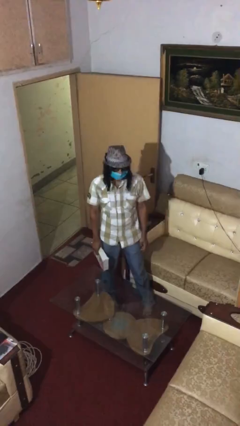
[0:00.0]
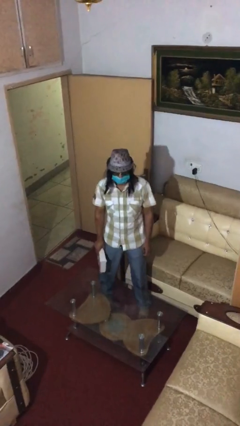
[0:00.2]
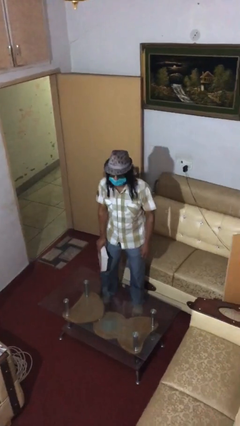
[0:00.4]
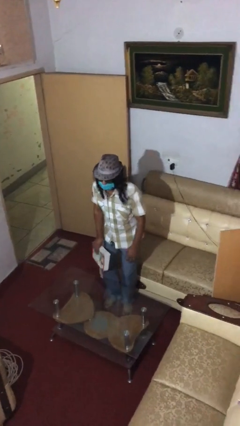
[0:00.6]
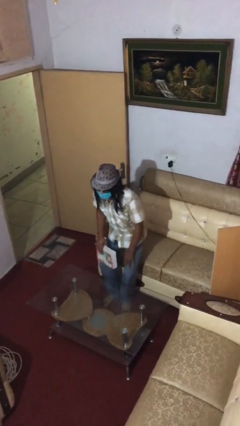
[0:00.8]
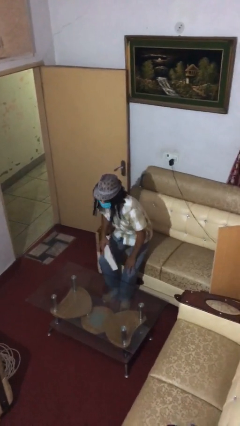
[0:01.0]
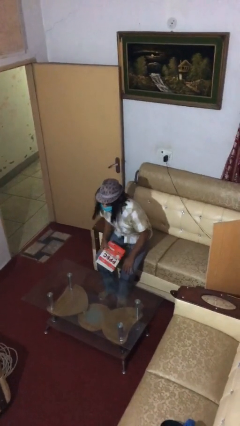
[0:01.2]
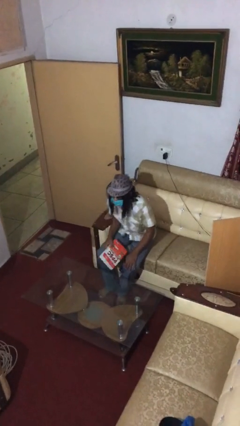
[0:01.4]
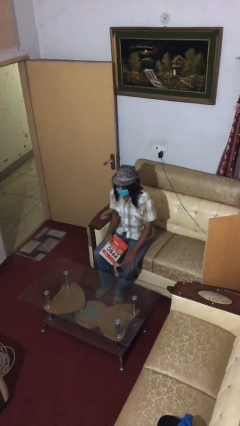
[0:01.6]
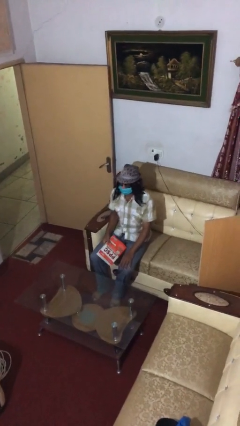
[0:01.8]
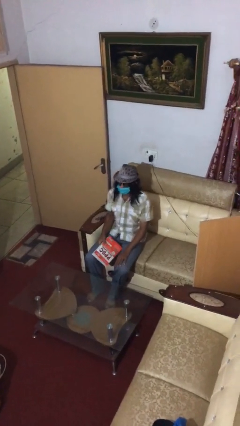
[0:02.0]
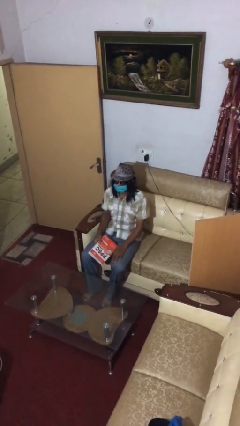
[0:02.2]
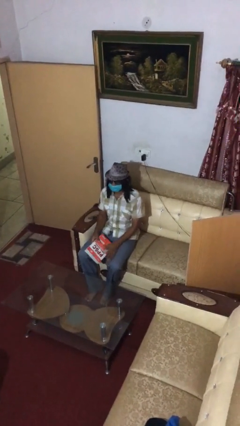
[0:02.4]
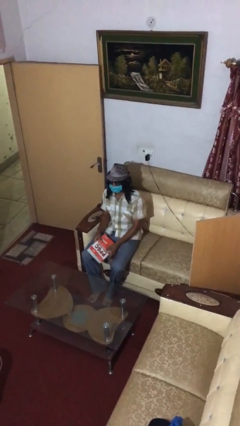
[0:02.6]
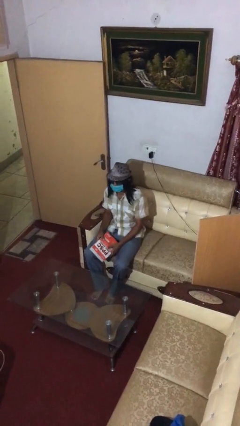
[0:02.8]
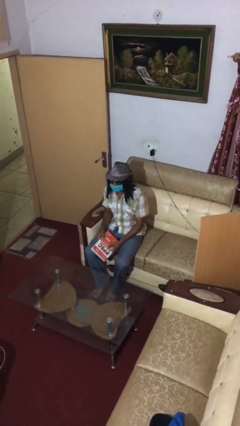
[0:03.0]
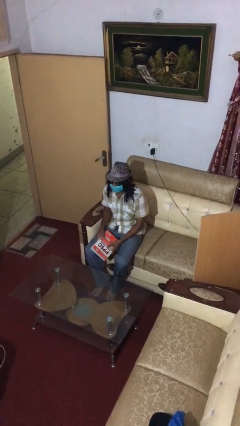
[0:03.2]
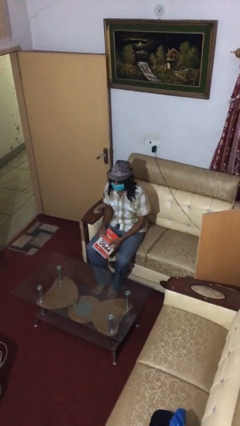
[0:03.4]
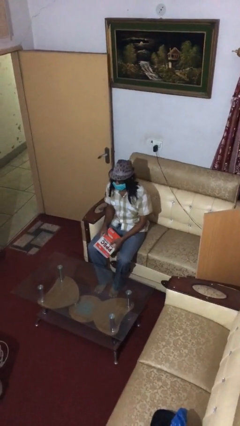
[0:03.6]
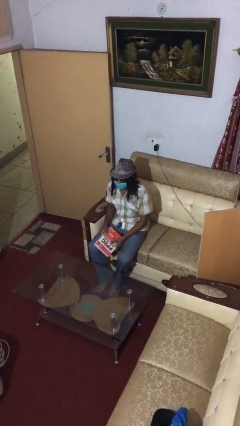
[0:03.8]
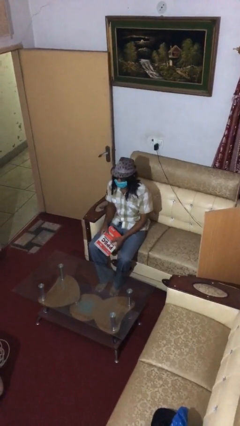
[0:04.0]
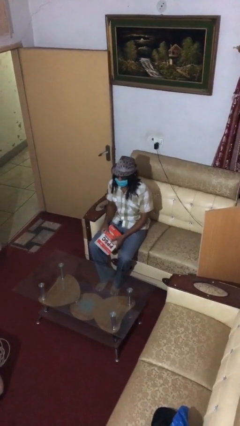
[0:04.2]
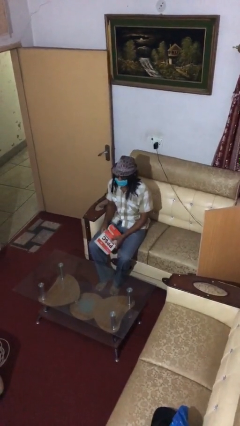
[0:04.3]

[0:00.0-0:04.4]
person sits down

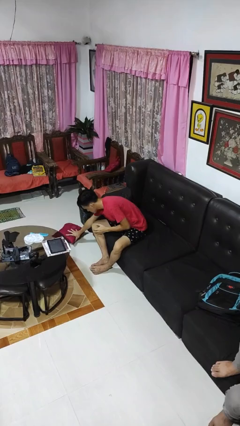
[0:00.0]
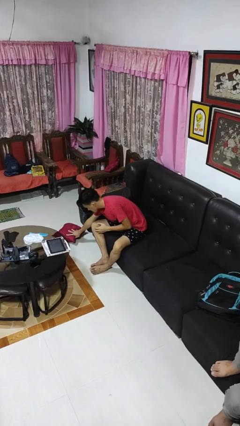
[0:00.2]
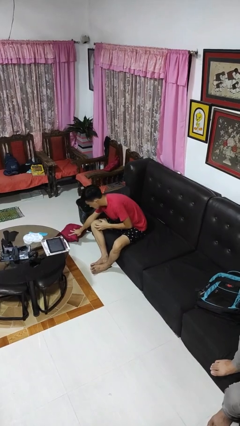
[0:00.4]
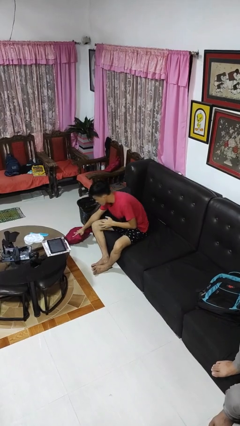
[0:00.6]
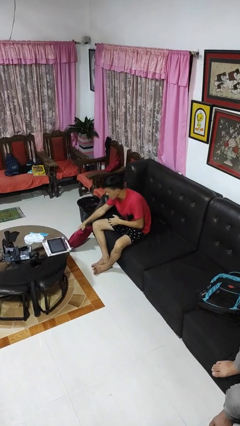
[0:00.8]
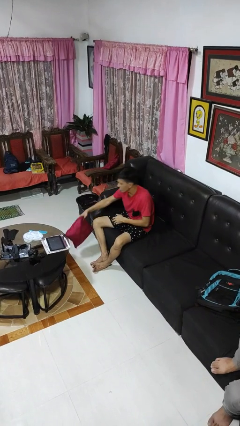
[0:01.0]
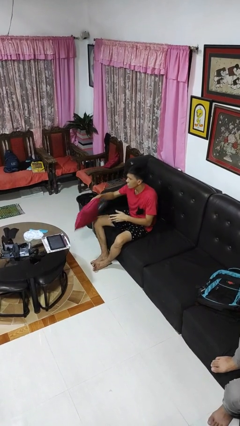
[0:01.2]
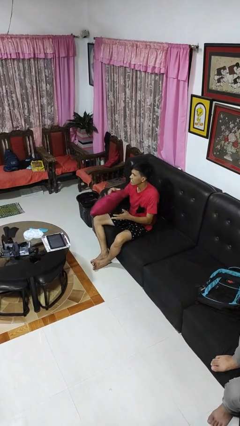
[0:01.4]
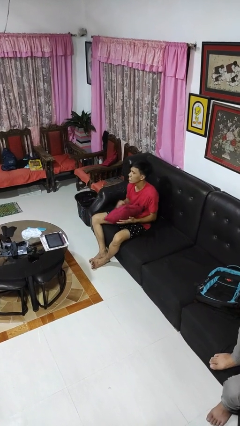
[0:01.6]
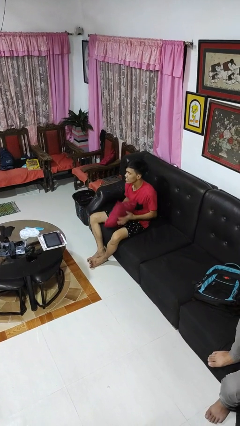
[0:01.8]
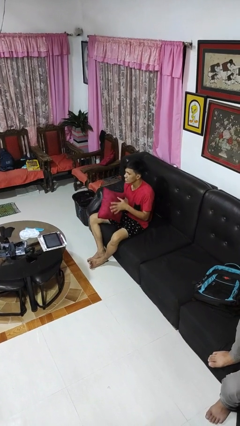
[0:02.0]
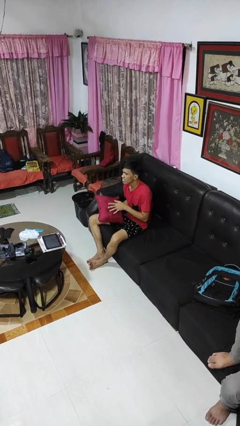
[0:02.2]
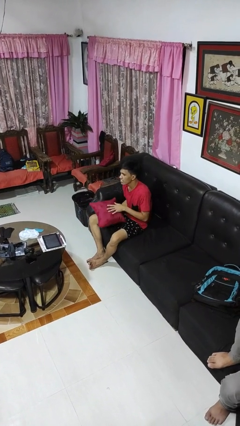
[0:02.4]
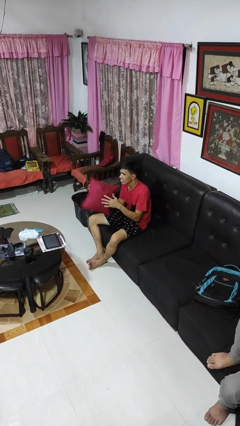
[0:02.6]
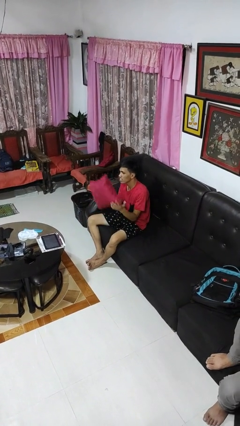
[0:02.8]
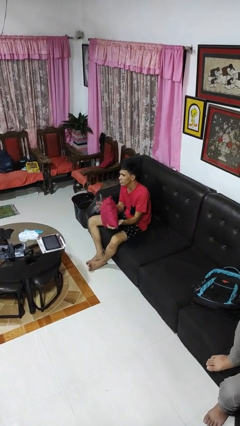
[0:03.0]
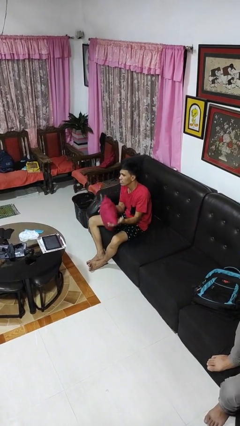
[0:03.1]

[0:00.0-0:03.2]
person picks up object from floor

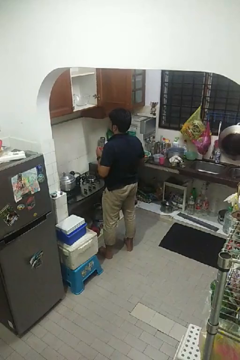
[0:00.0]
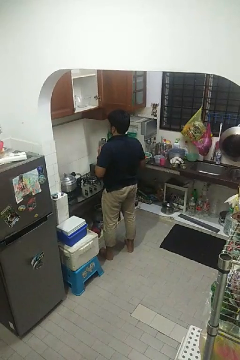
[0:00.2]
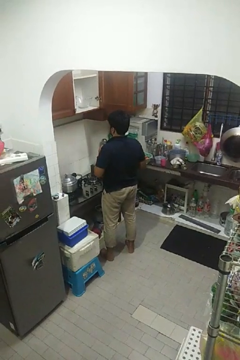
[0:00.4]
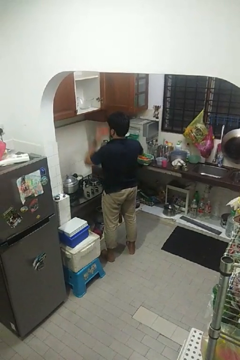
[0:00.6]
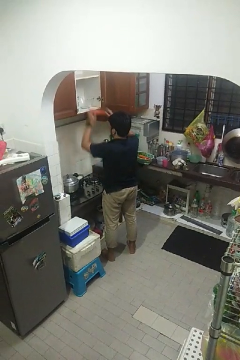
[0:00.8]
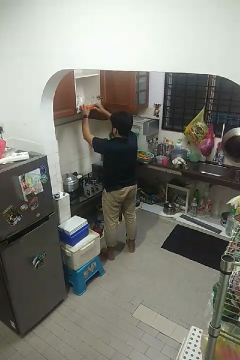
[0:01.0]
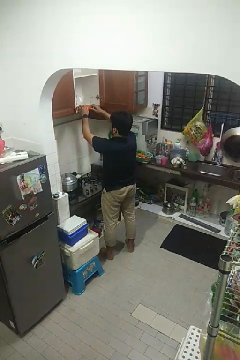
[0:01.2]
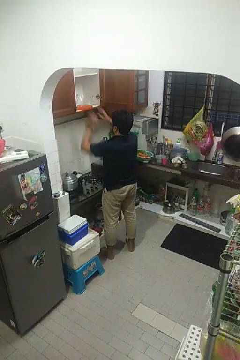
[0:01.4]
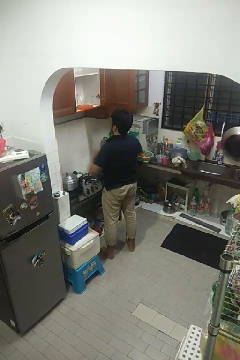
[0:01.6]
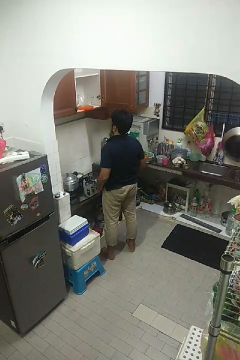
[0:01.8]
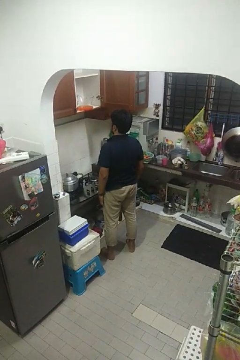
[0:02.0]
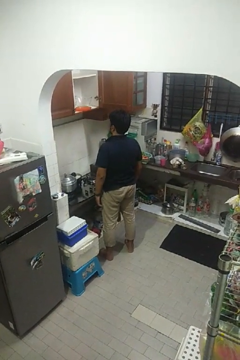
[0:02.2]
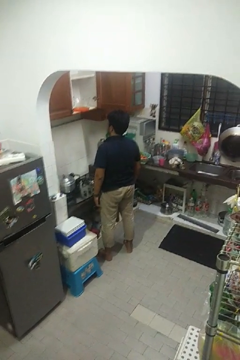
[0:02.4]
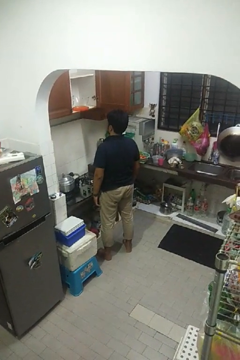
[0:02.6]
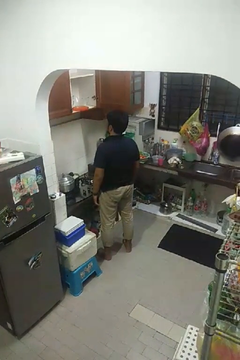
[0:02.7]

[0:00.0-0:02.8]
person puts object in cabinet

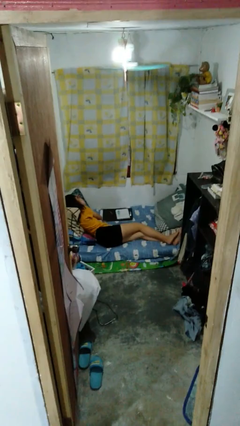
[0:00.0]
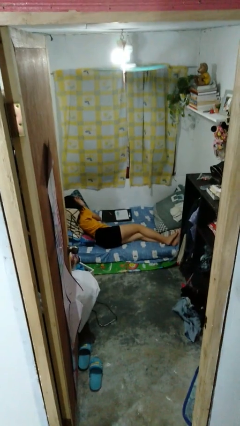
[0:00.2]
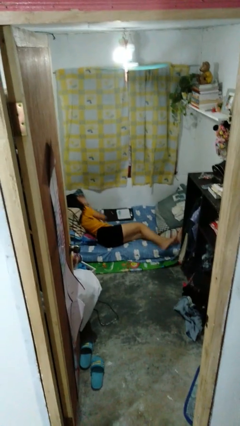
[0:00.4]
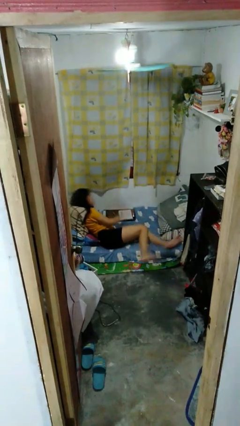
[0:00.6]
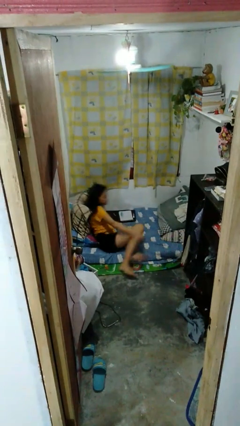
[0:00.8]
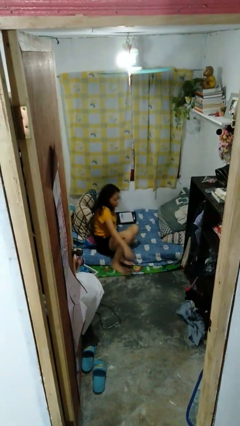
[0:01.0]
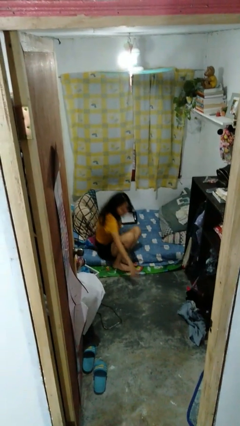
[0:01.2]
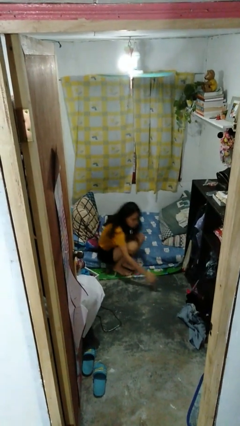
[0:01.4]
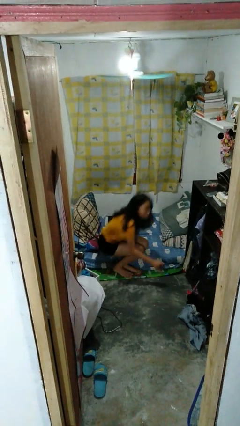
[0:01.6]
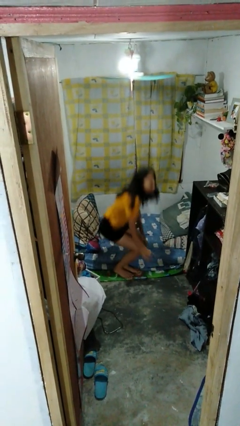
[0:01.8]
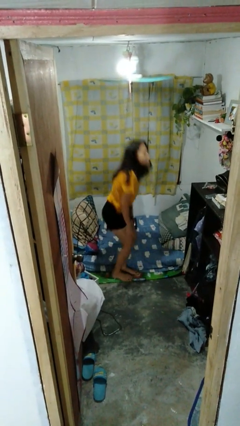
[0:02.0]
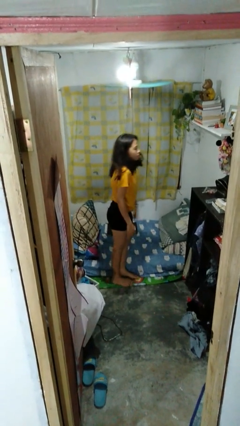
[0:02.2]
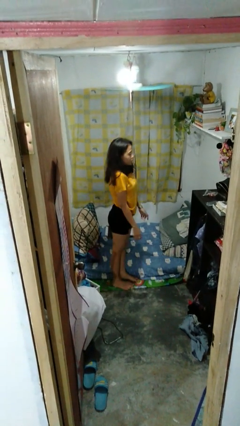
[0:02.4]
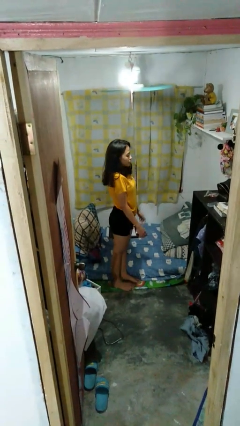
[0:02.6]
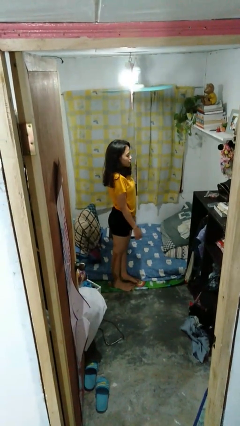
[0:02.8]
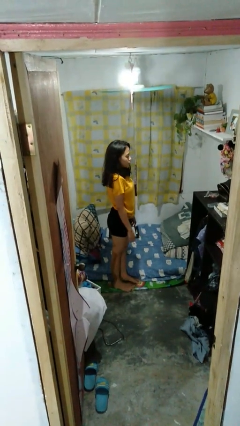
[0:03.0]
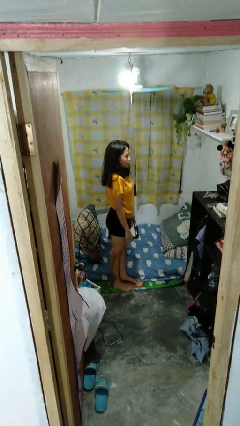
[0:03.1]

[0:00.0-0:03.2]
person stands up

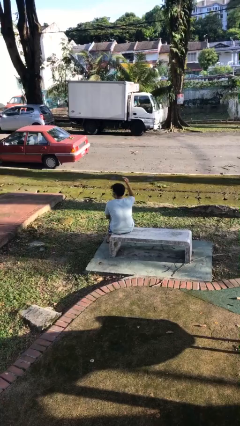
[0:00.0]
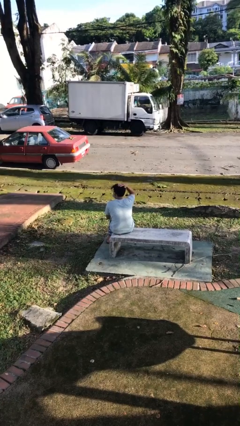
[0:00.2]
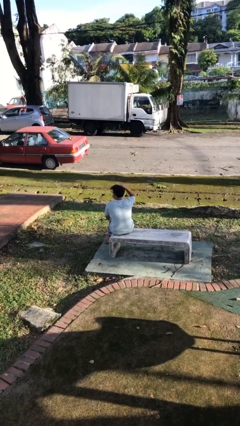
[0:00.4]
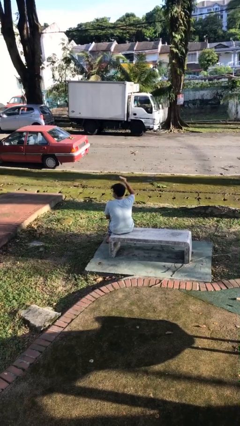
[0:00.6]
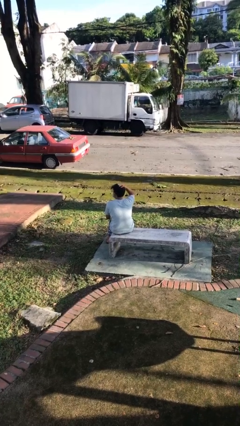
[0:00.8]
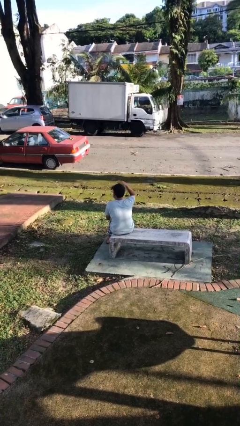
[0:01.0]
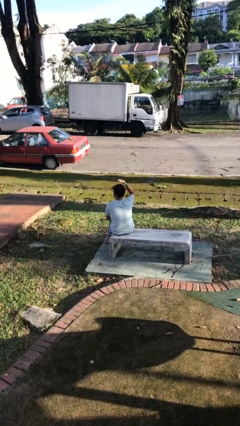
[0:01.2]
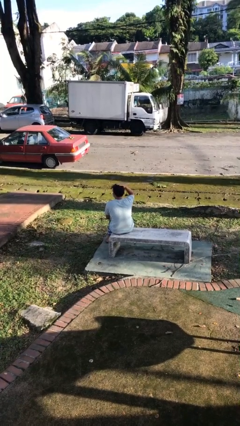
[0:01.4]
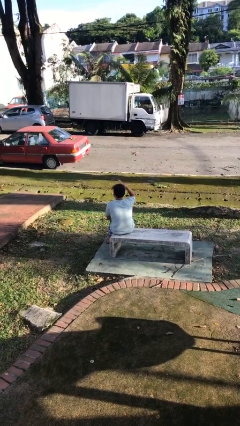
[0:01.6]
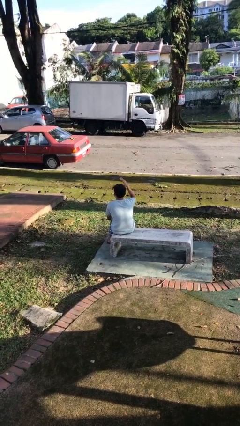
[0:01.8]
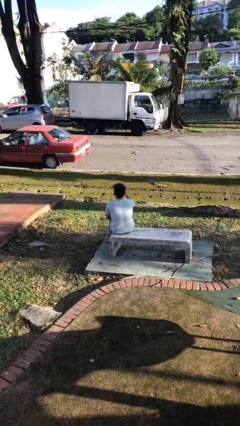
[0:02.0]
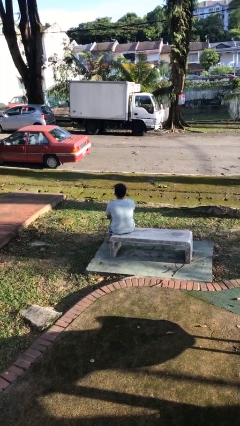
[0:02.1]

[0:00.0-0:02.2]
person pats head

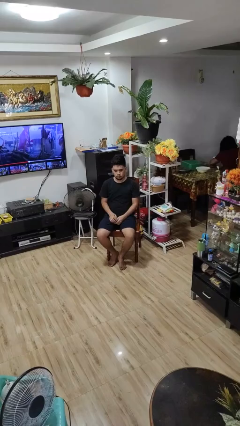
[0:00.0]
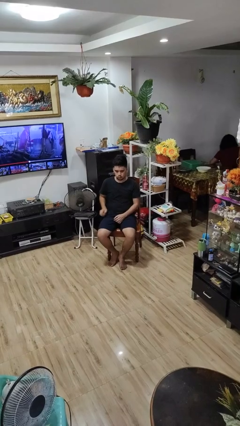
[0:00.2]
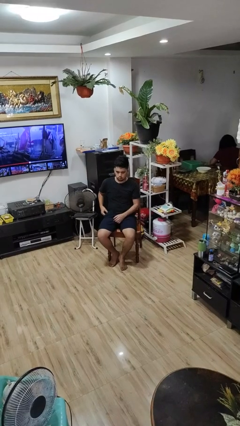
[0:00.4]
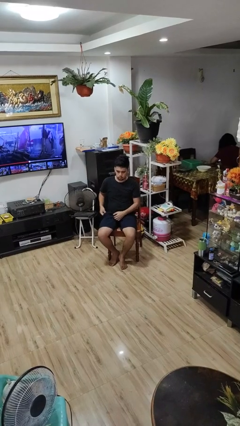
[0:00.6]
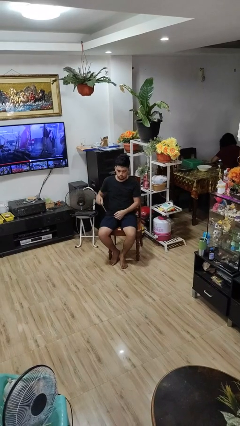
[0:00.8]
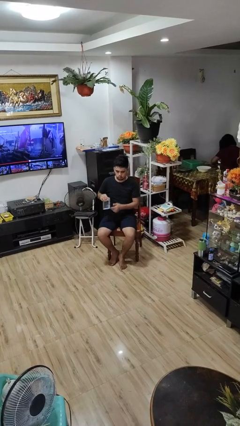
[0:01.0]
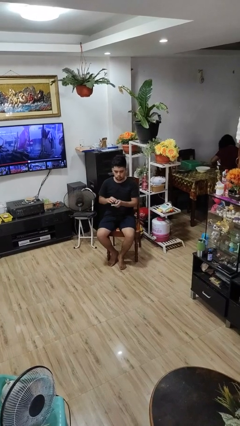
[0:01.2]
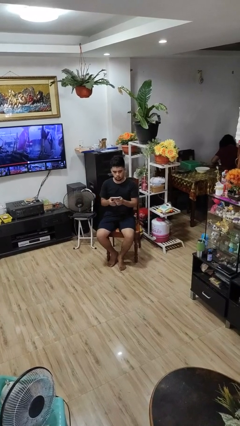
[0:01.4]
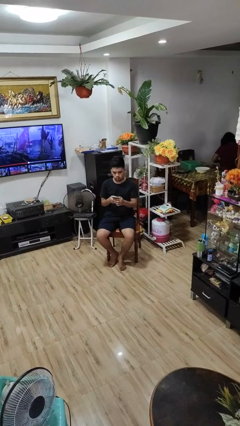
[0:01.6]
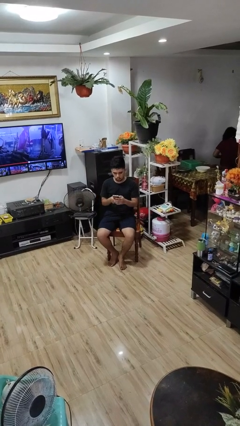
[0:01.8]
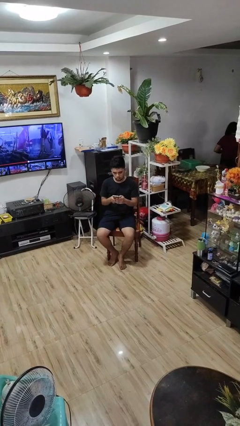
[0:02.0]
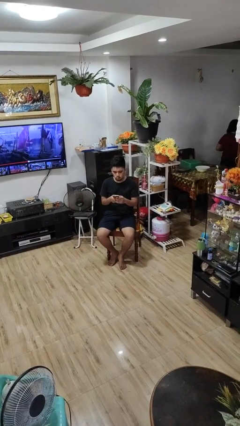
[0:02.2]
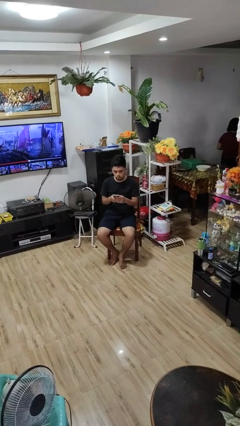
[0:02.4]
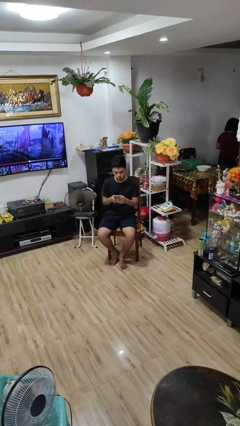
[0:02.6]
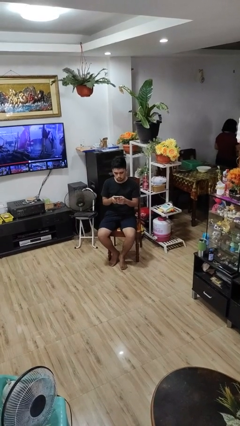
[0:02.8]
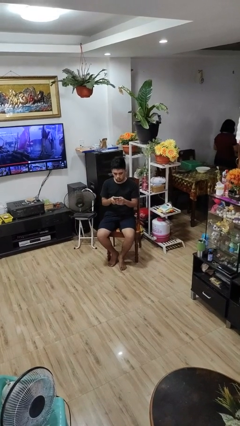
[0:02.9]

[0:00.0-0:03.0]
person takes phone from pocket
